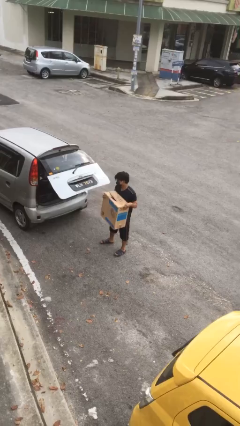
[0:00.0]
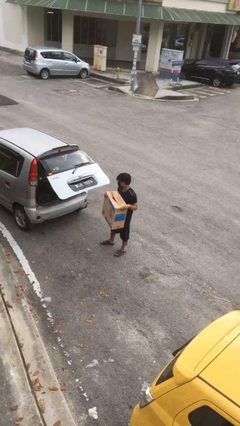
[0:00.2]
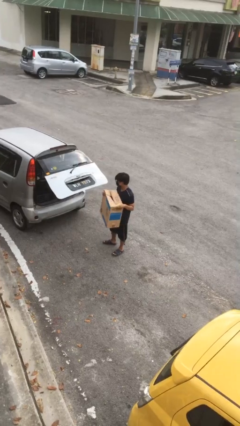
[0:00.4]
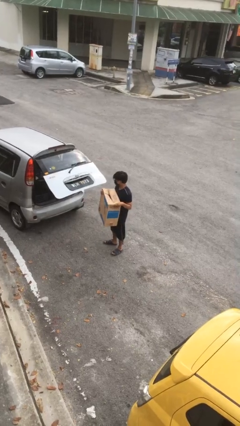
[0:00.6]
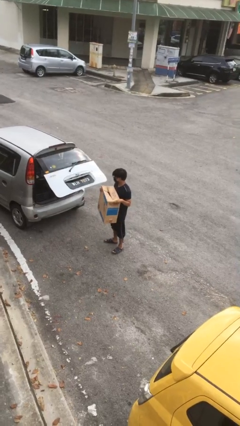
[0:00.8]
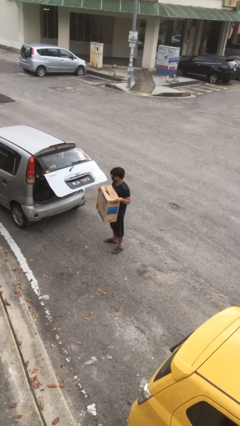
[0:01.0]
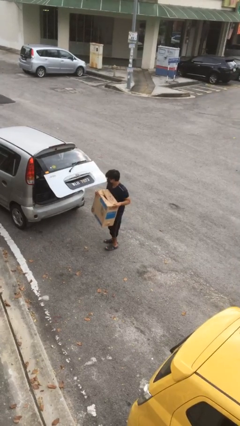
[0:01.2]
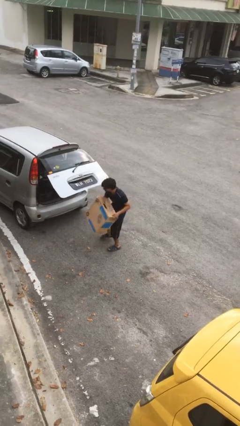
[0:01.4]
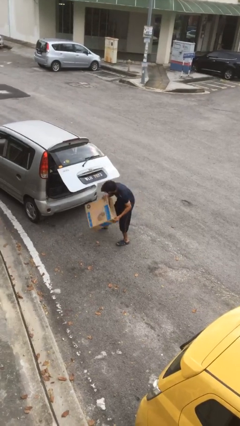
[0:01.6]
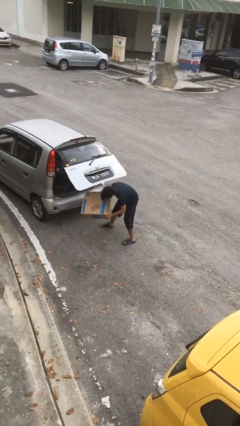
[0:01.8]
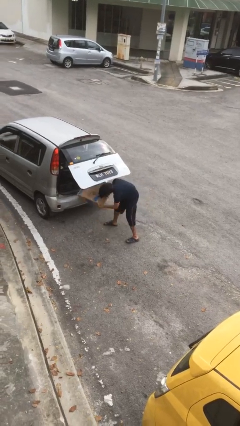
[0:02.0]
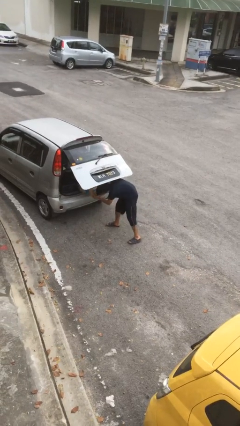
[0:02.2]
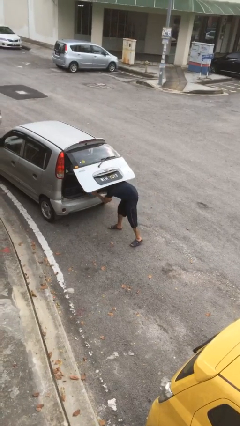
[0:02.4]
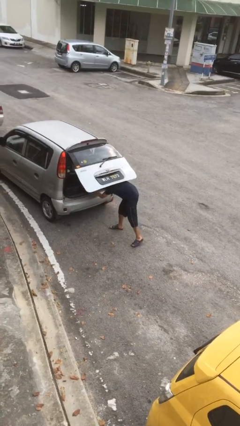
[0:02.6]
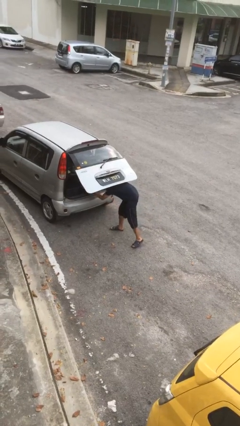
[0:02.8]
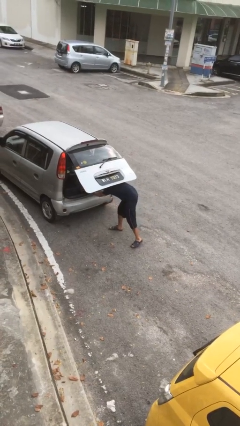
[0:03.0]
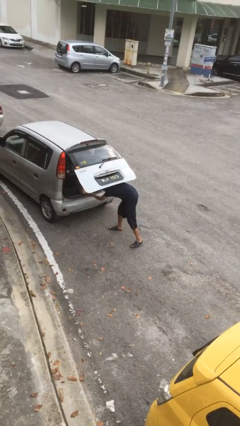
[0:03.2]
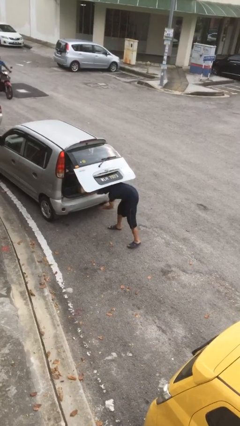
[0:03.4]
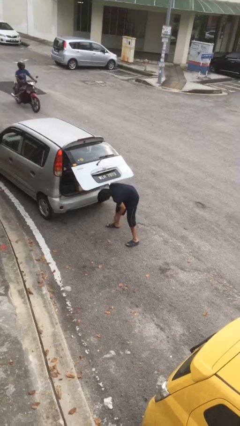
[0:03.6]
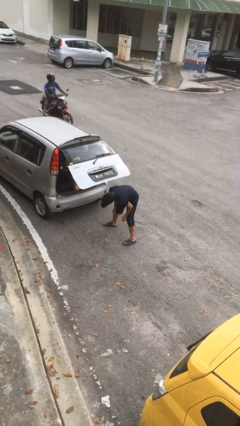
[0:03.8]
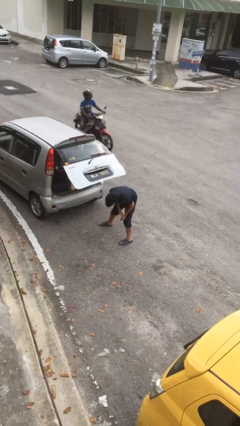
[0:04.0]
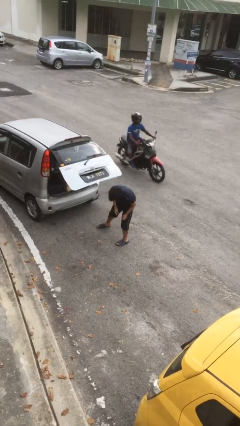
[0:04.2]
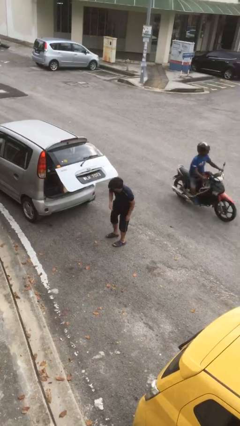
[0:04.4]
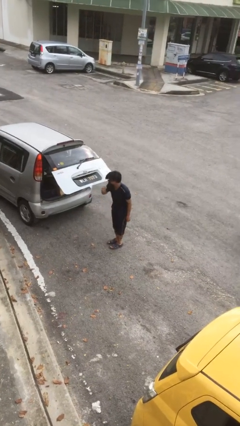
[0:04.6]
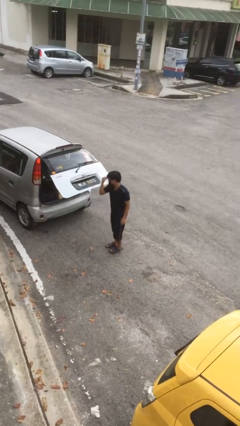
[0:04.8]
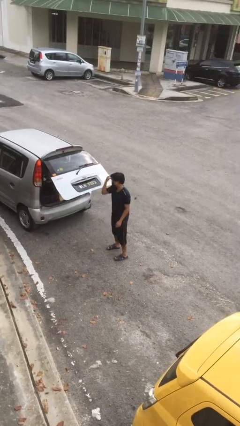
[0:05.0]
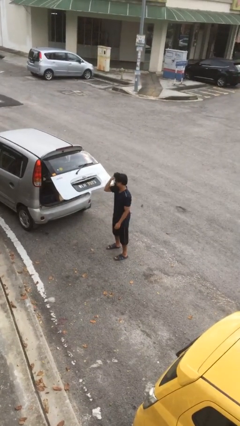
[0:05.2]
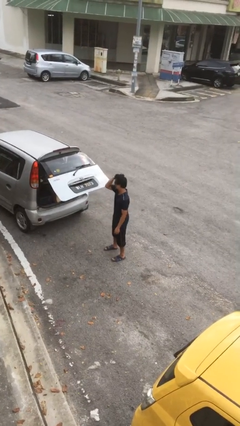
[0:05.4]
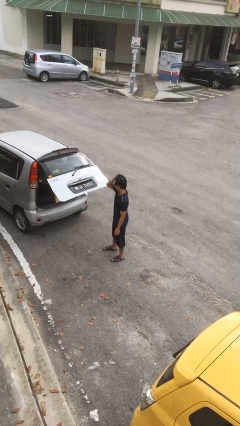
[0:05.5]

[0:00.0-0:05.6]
person loads car

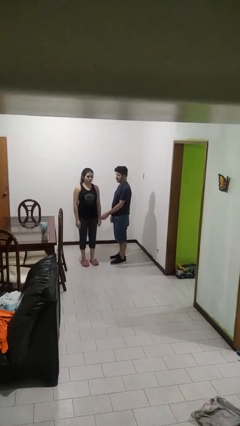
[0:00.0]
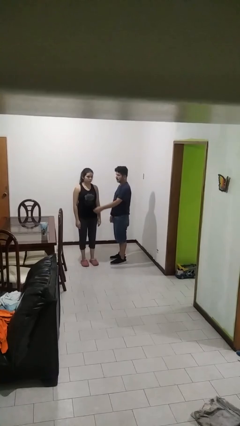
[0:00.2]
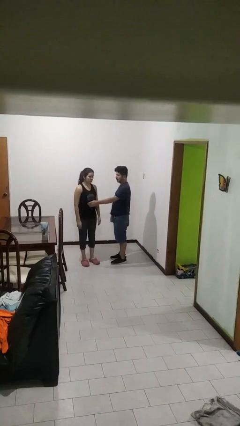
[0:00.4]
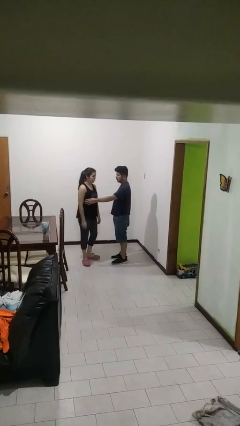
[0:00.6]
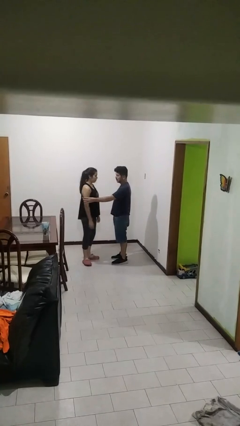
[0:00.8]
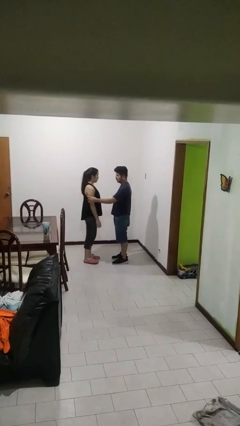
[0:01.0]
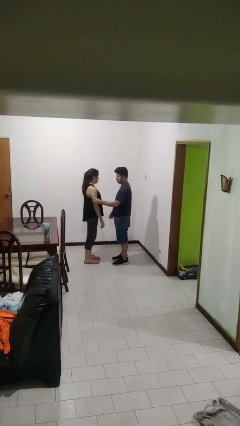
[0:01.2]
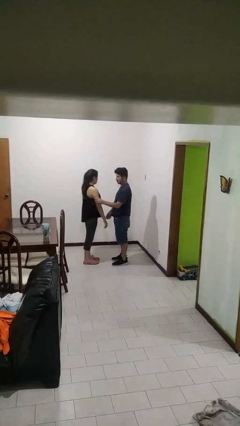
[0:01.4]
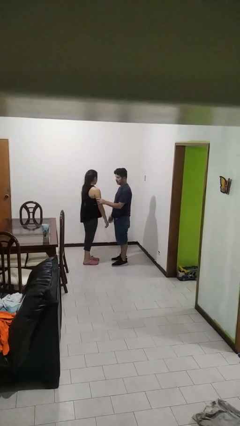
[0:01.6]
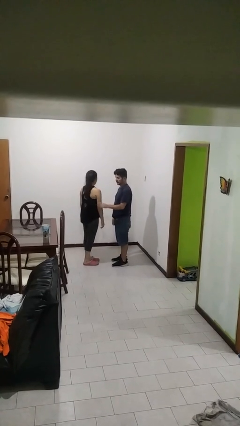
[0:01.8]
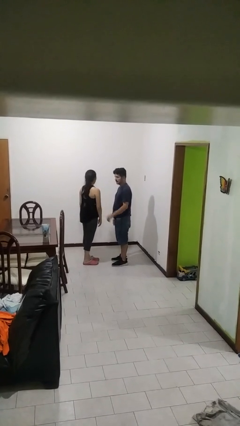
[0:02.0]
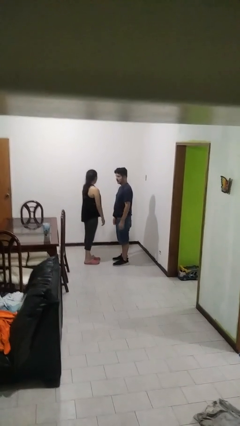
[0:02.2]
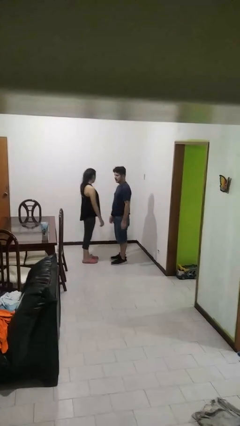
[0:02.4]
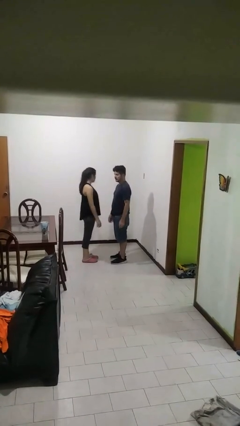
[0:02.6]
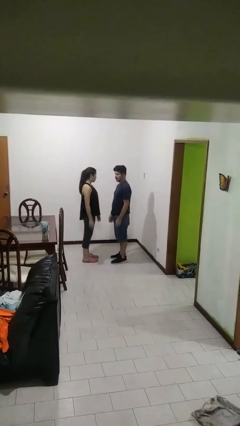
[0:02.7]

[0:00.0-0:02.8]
person grabs person by bicep

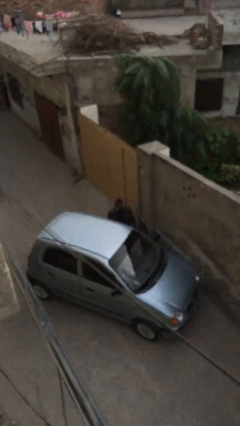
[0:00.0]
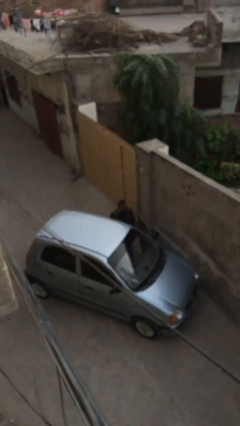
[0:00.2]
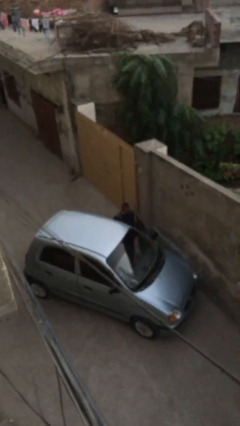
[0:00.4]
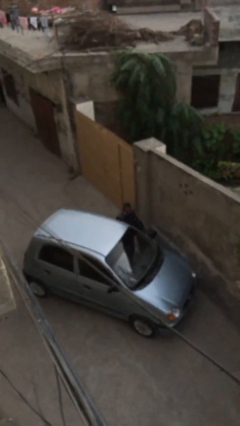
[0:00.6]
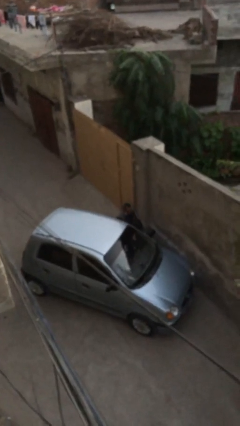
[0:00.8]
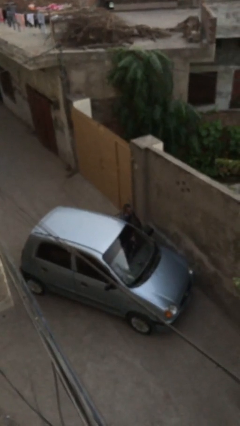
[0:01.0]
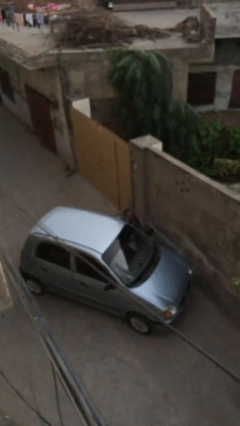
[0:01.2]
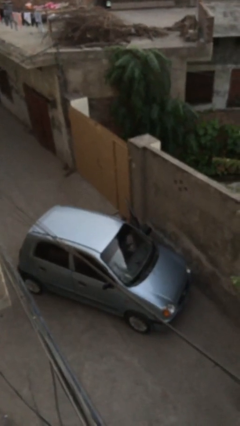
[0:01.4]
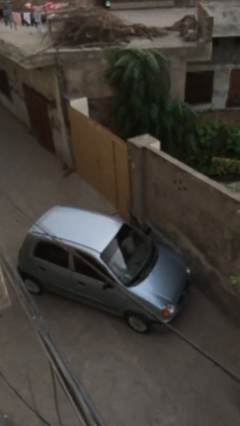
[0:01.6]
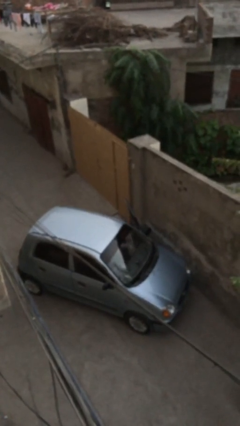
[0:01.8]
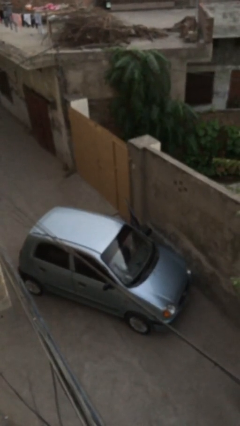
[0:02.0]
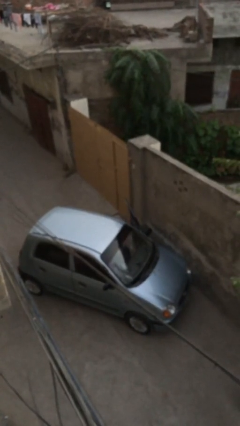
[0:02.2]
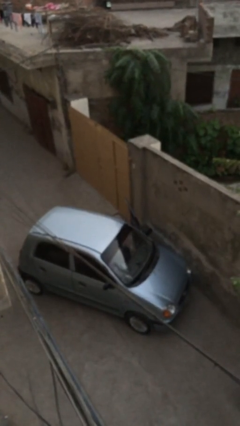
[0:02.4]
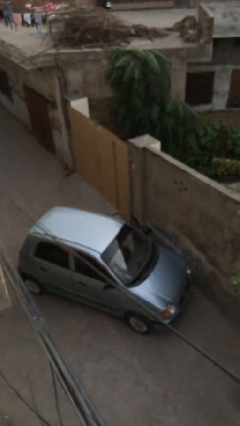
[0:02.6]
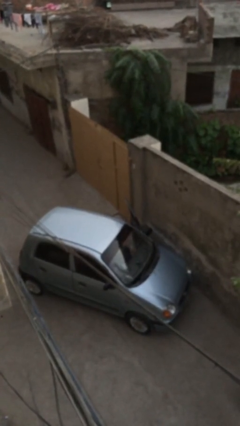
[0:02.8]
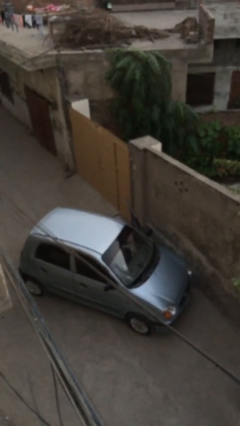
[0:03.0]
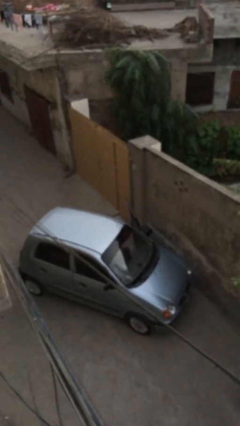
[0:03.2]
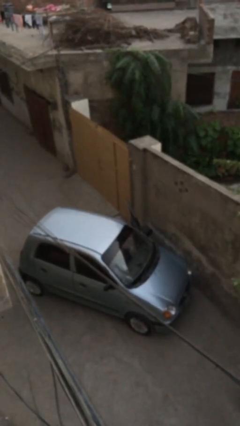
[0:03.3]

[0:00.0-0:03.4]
person enters car

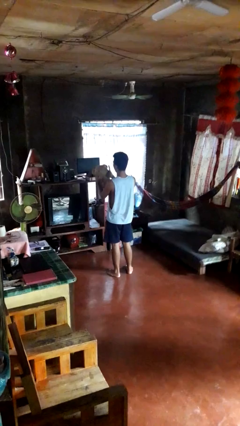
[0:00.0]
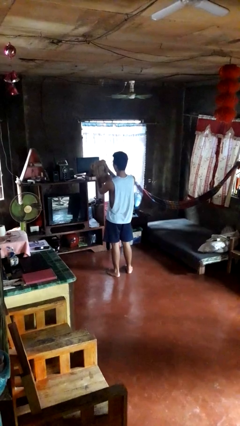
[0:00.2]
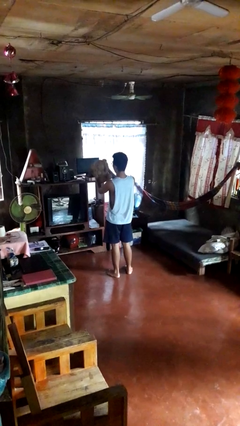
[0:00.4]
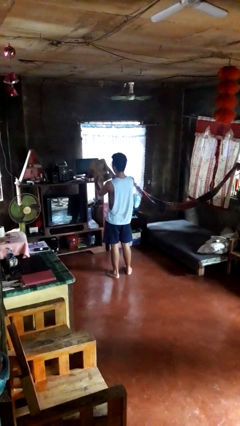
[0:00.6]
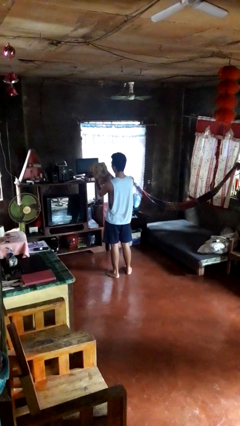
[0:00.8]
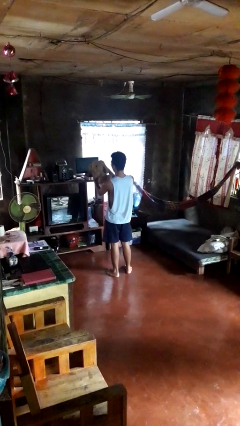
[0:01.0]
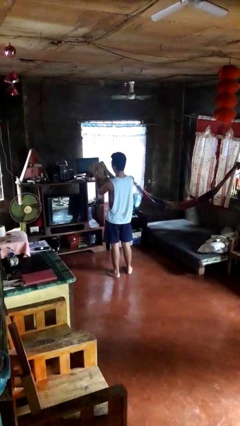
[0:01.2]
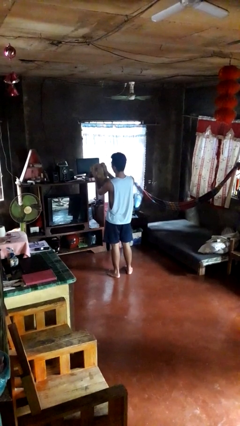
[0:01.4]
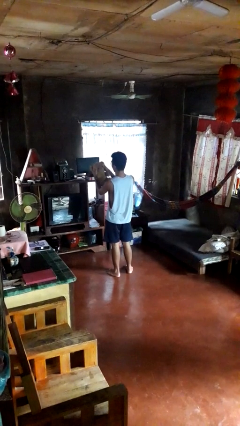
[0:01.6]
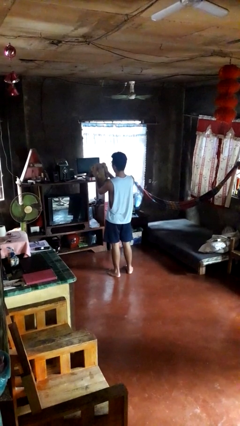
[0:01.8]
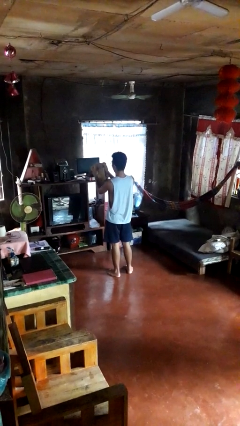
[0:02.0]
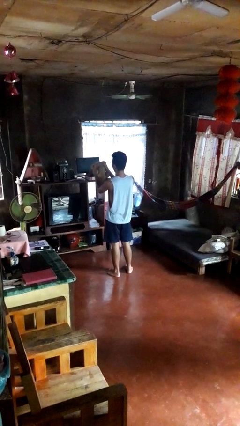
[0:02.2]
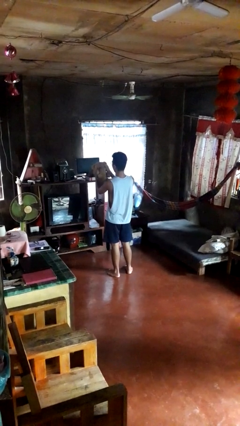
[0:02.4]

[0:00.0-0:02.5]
person squeezes object

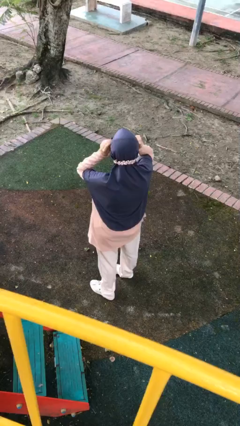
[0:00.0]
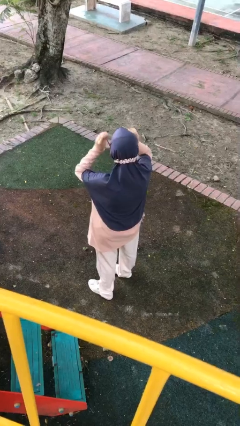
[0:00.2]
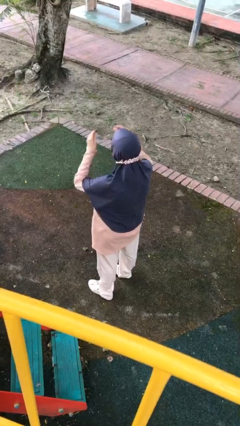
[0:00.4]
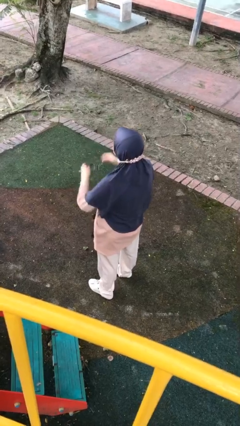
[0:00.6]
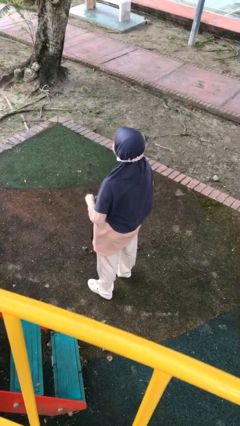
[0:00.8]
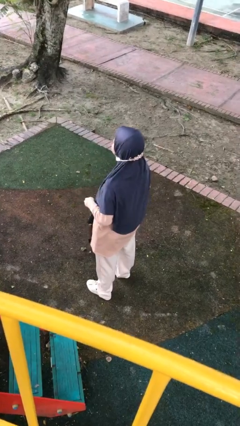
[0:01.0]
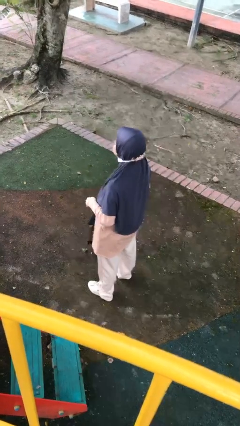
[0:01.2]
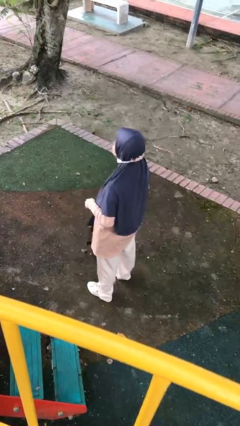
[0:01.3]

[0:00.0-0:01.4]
person takes off glasses

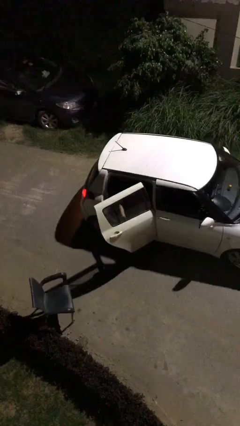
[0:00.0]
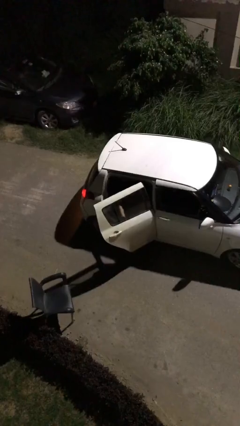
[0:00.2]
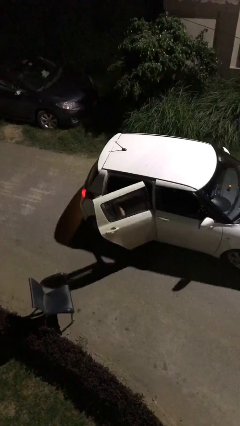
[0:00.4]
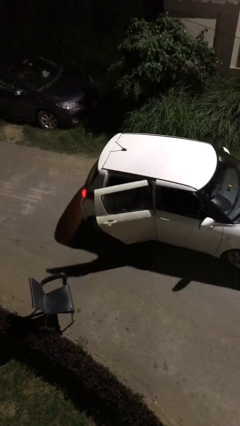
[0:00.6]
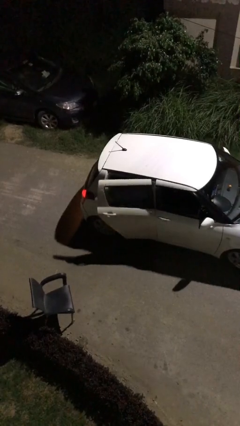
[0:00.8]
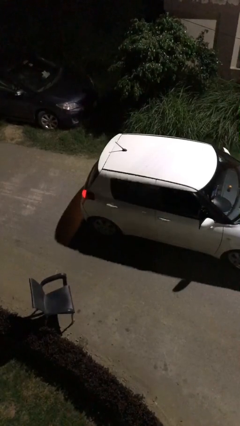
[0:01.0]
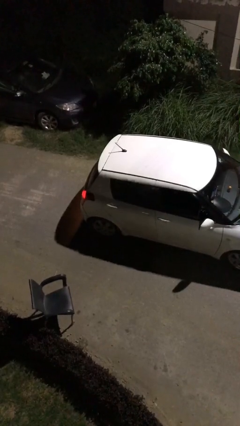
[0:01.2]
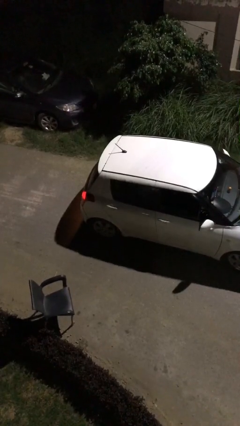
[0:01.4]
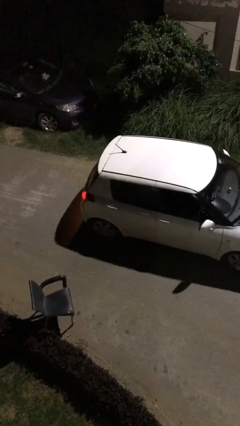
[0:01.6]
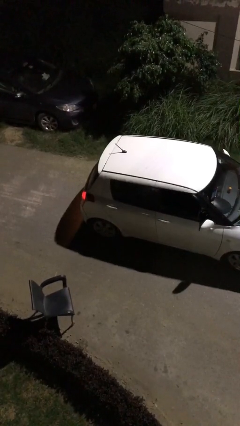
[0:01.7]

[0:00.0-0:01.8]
person closes car door

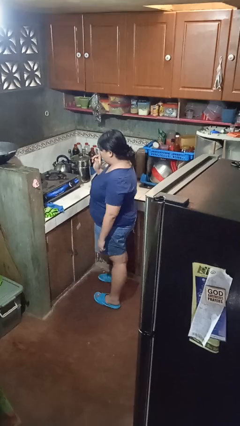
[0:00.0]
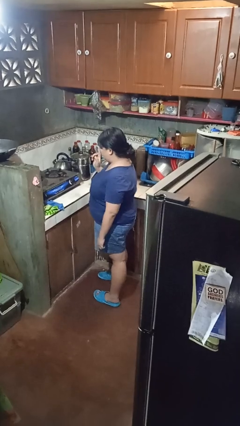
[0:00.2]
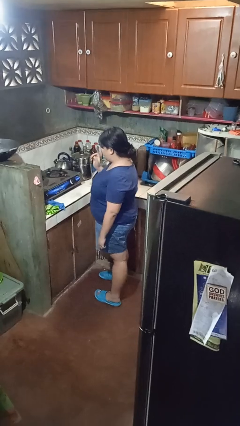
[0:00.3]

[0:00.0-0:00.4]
person burns hand
